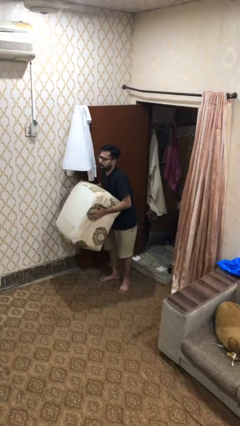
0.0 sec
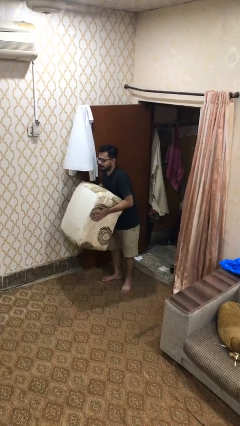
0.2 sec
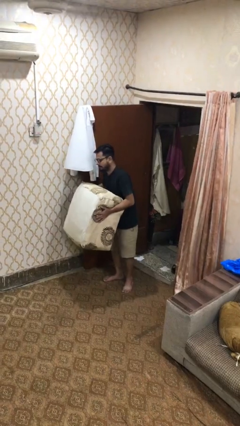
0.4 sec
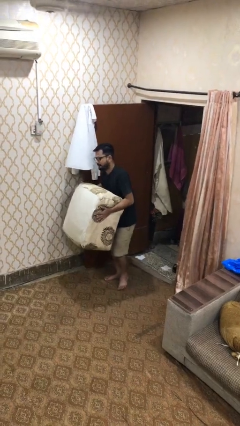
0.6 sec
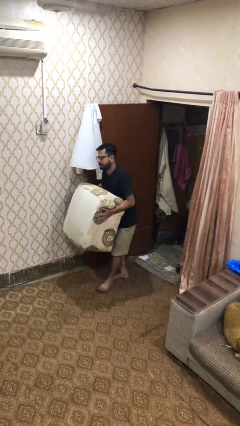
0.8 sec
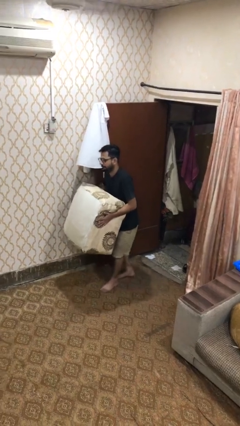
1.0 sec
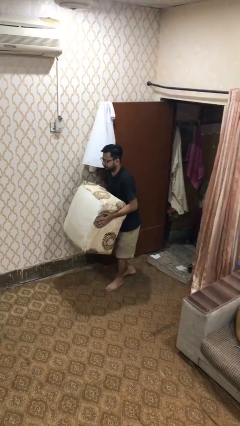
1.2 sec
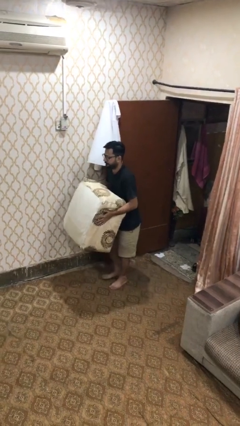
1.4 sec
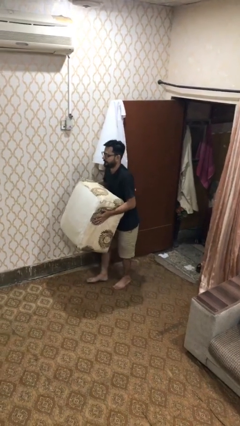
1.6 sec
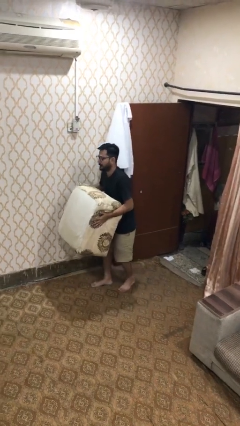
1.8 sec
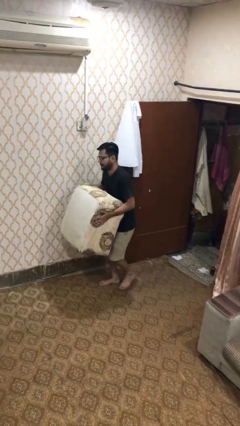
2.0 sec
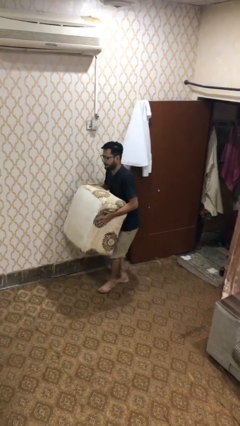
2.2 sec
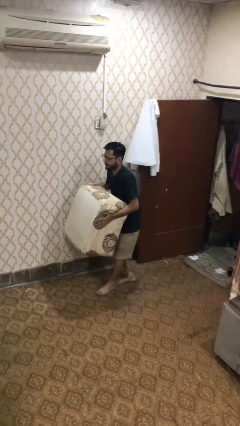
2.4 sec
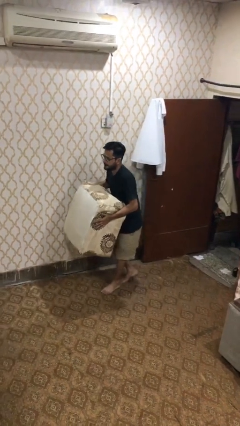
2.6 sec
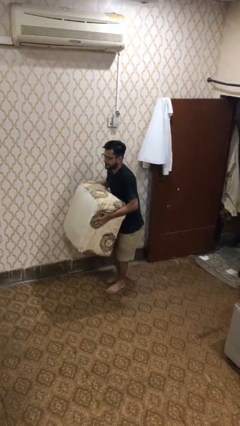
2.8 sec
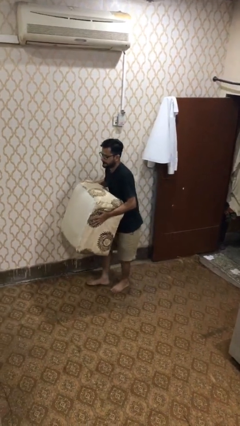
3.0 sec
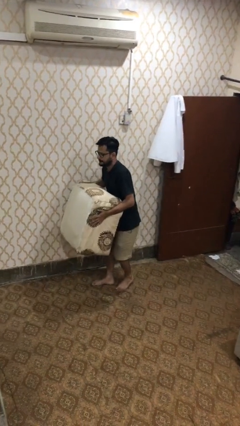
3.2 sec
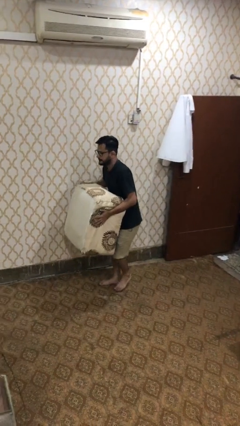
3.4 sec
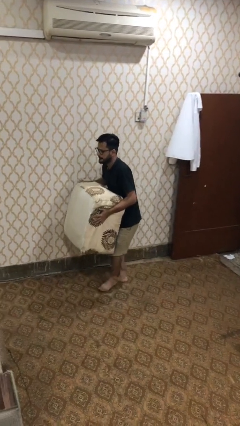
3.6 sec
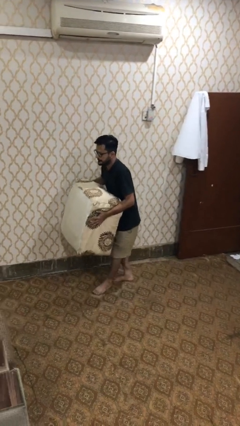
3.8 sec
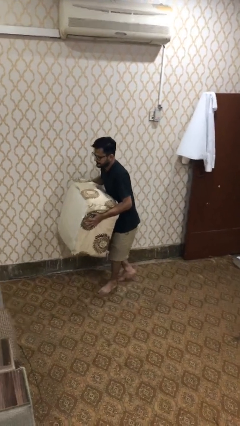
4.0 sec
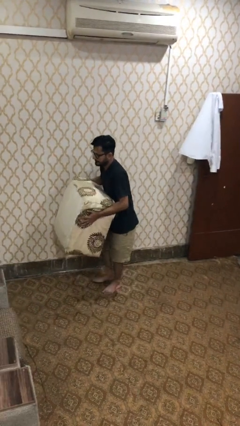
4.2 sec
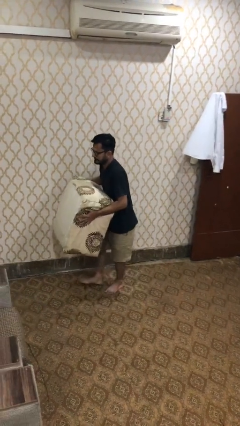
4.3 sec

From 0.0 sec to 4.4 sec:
person carries heavy object

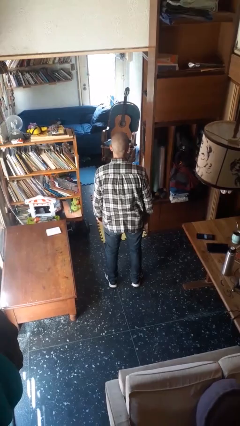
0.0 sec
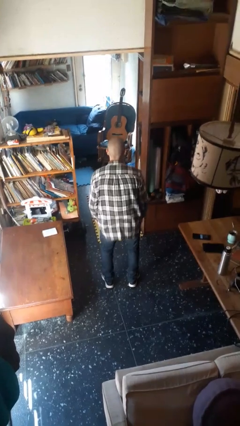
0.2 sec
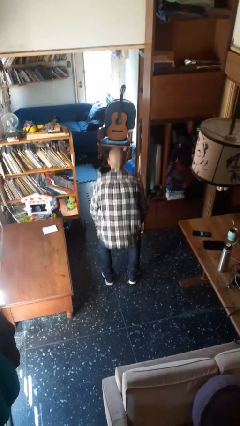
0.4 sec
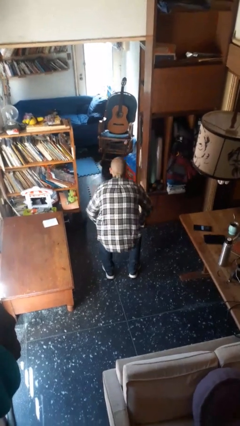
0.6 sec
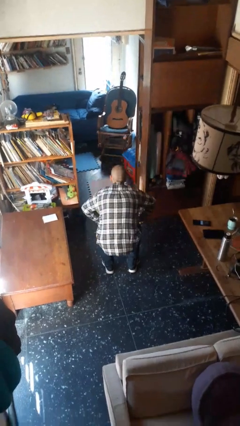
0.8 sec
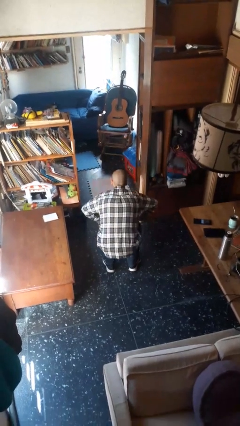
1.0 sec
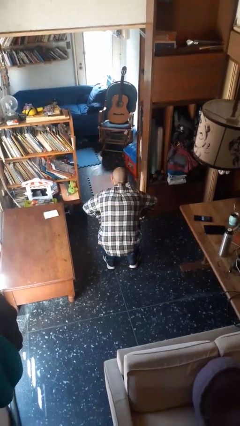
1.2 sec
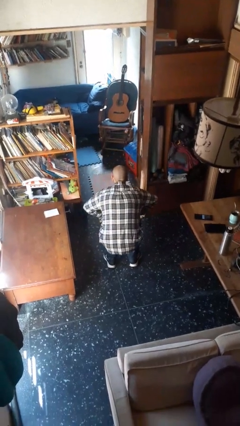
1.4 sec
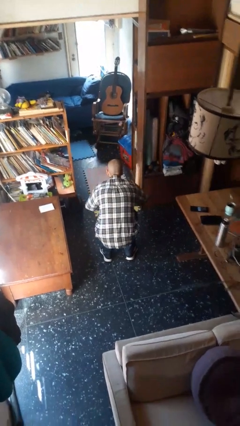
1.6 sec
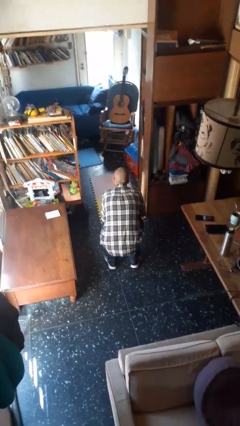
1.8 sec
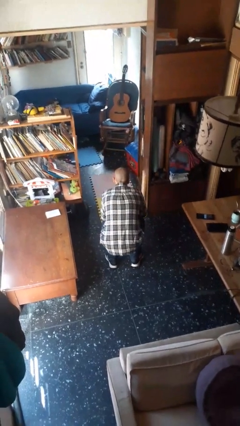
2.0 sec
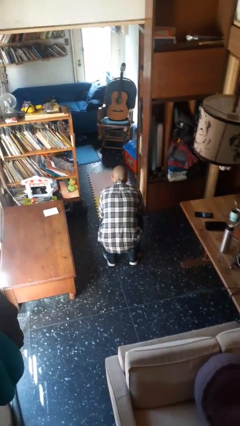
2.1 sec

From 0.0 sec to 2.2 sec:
person squats

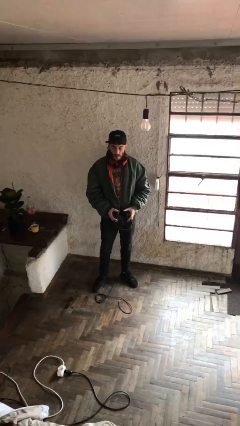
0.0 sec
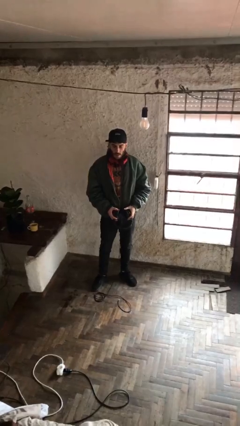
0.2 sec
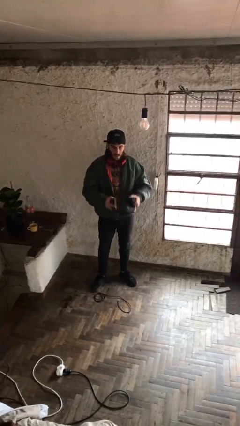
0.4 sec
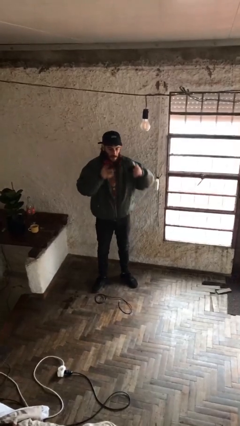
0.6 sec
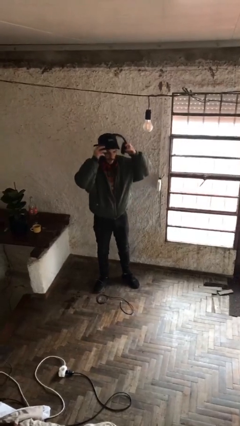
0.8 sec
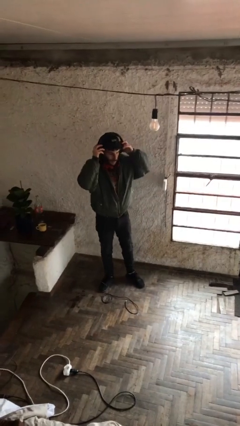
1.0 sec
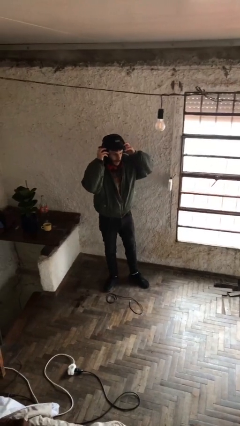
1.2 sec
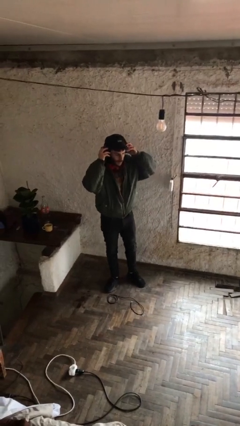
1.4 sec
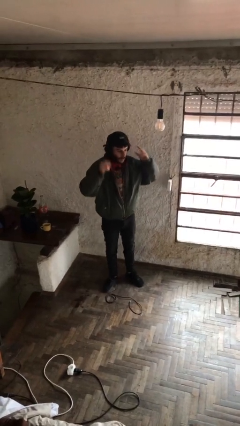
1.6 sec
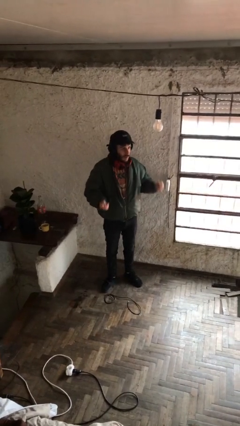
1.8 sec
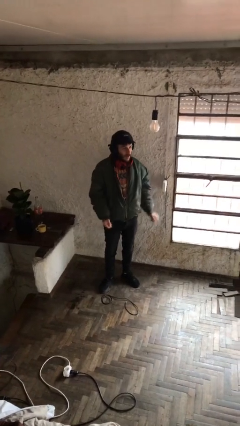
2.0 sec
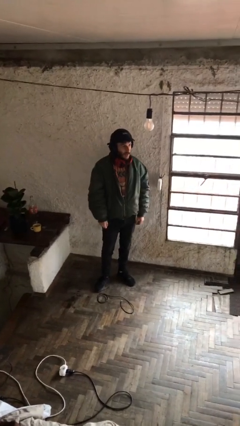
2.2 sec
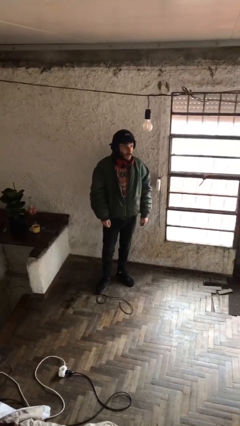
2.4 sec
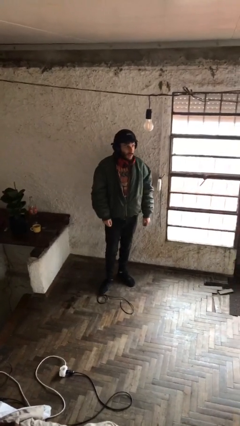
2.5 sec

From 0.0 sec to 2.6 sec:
person puts on headphones

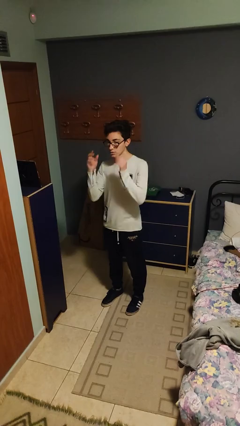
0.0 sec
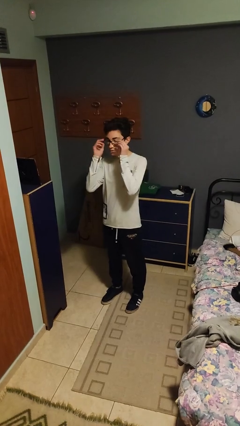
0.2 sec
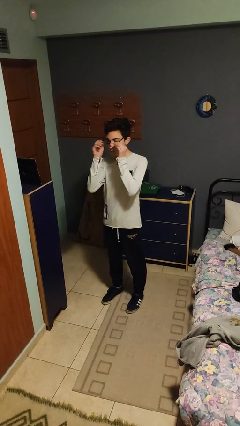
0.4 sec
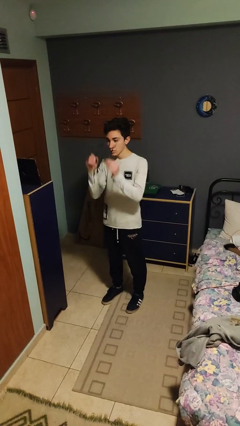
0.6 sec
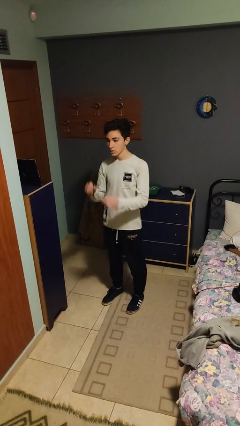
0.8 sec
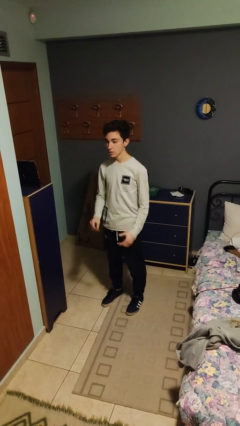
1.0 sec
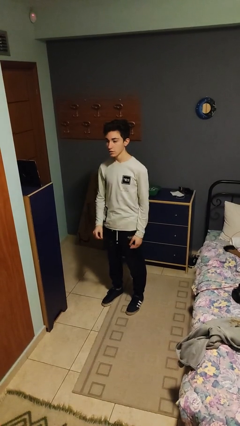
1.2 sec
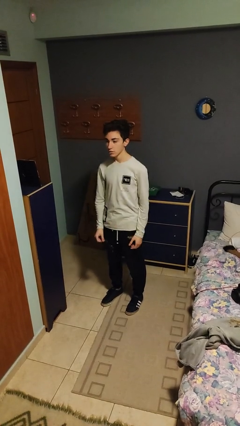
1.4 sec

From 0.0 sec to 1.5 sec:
person takes off glasses

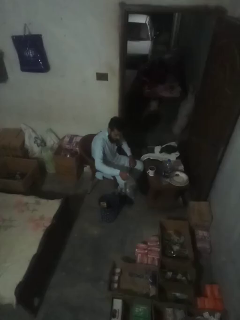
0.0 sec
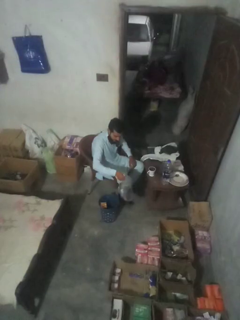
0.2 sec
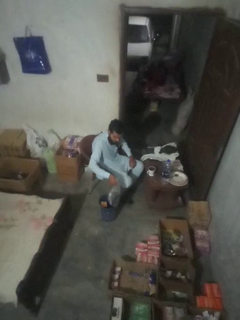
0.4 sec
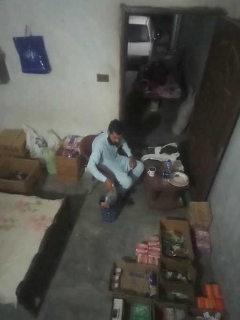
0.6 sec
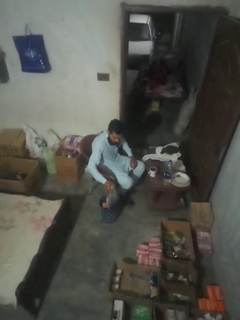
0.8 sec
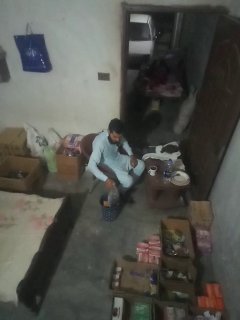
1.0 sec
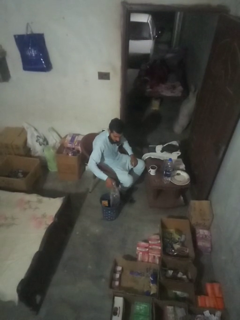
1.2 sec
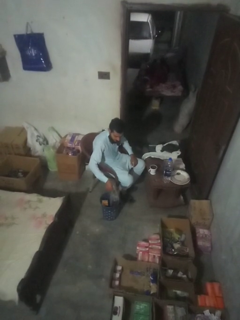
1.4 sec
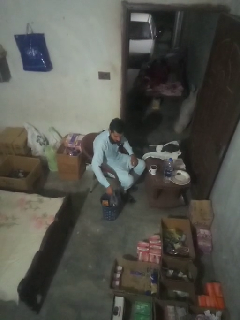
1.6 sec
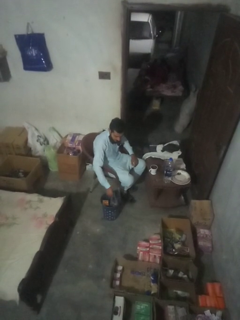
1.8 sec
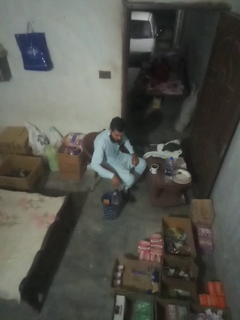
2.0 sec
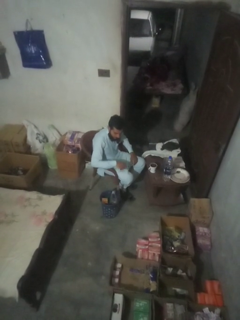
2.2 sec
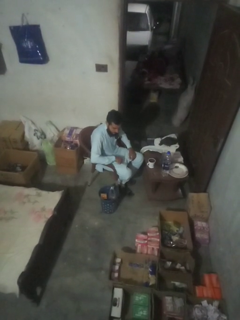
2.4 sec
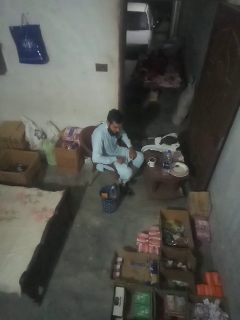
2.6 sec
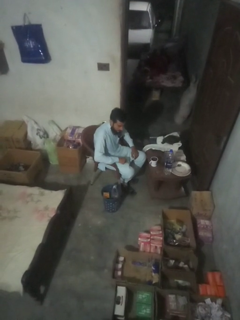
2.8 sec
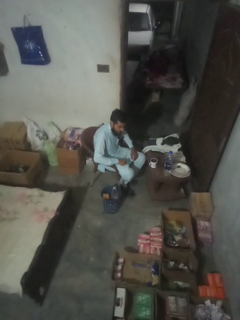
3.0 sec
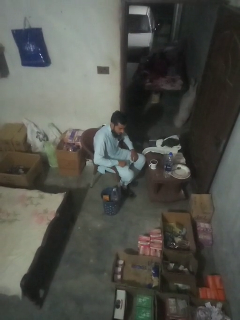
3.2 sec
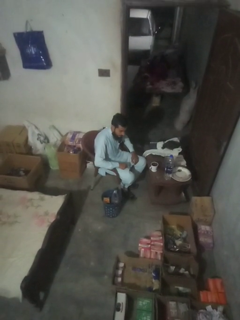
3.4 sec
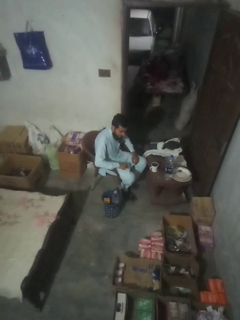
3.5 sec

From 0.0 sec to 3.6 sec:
person removes trashbag from trashcan

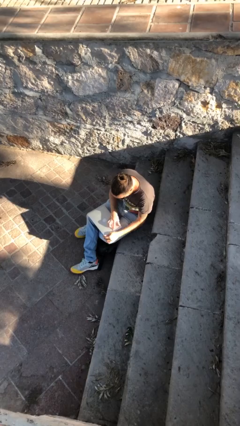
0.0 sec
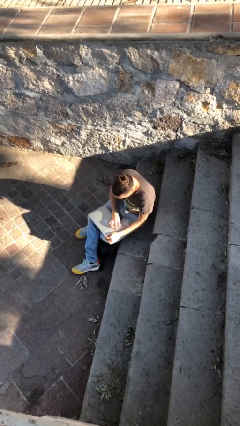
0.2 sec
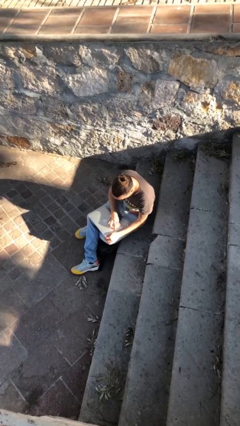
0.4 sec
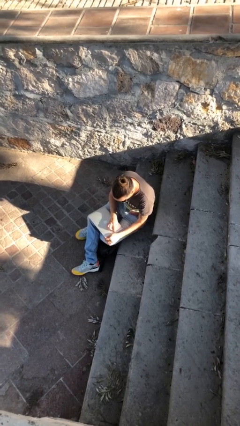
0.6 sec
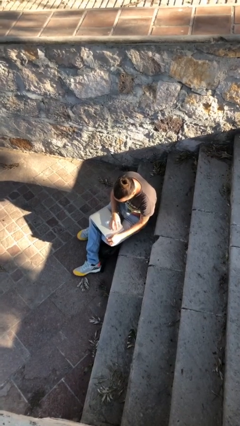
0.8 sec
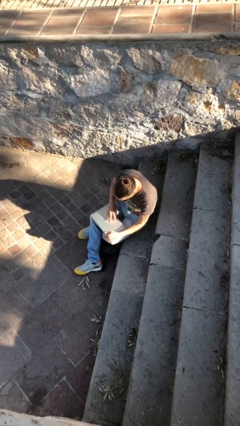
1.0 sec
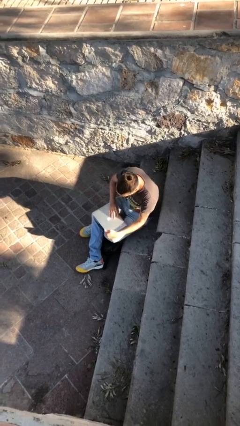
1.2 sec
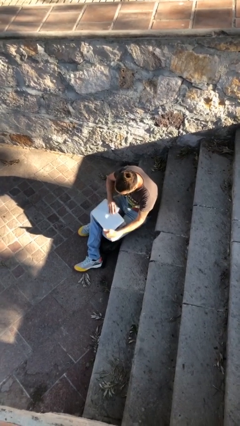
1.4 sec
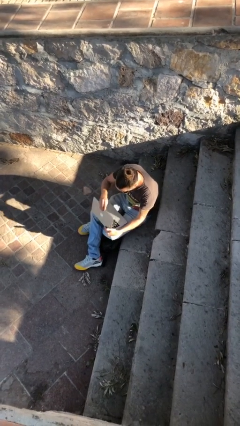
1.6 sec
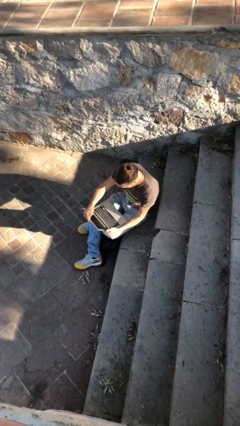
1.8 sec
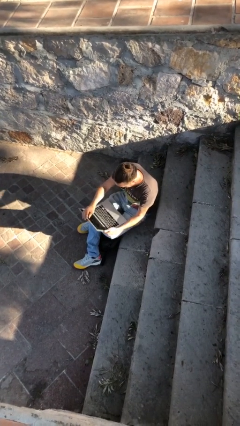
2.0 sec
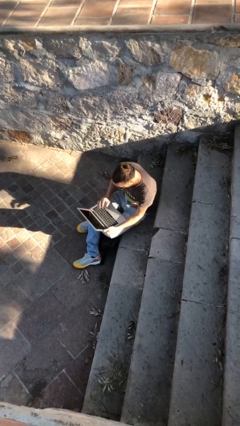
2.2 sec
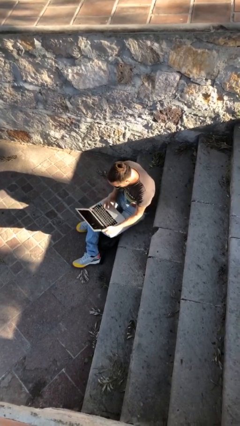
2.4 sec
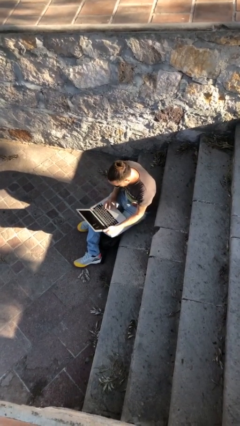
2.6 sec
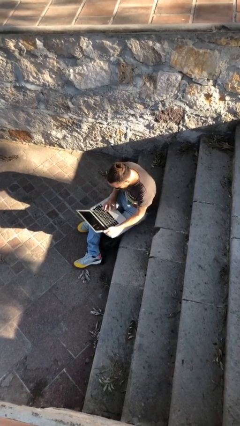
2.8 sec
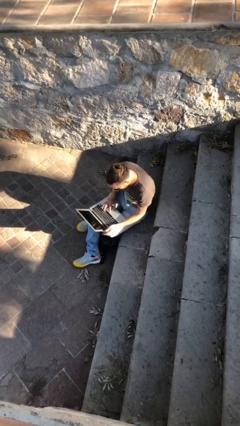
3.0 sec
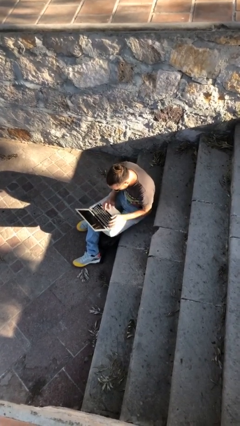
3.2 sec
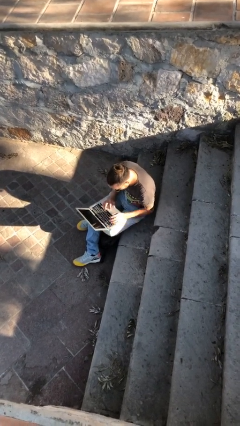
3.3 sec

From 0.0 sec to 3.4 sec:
person interacts with laptop

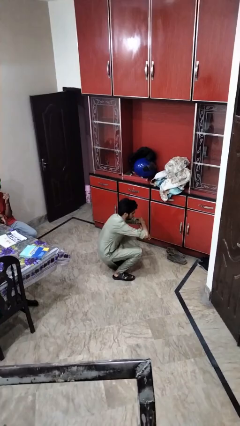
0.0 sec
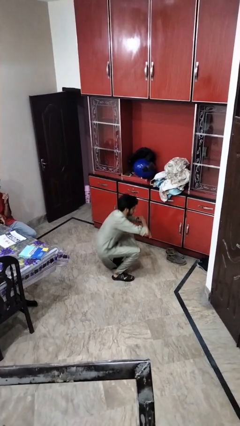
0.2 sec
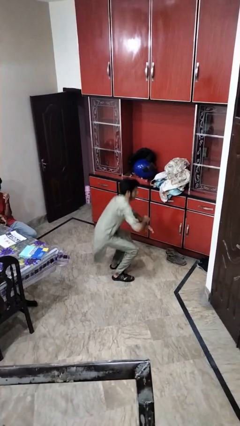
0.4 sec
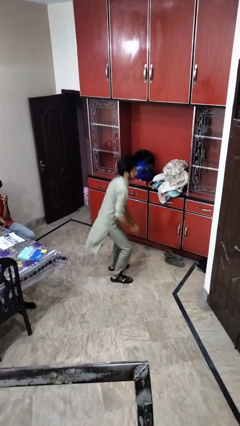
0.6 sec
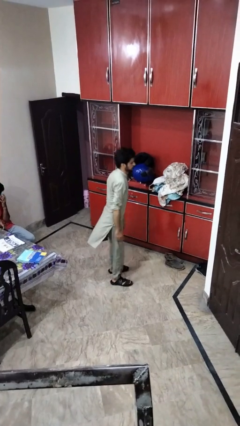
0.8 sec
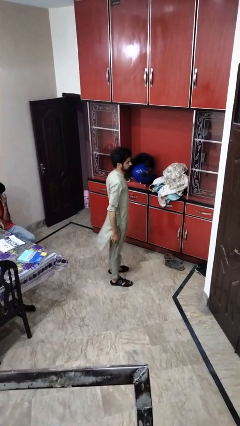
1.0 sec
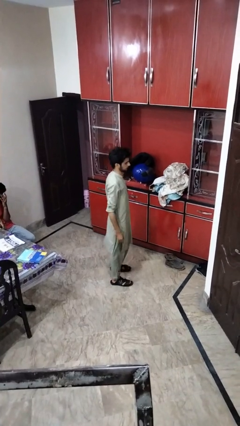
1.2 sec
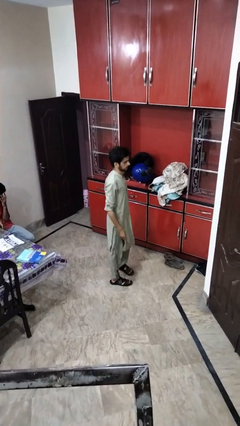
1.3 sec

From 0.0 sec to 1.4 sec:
person stands up
